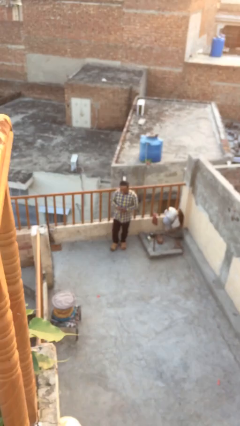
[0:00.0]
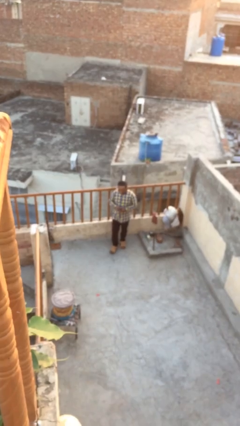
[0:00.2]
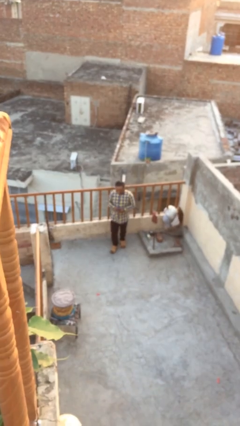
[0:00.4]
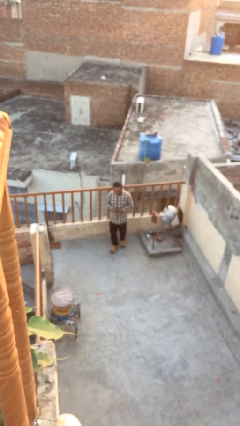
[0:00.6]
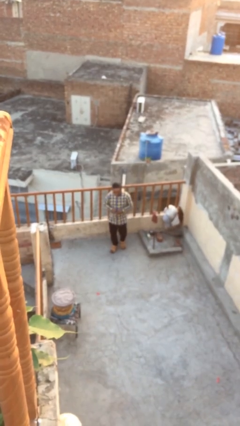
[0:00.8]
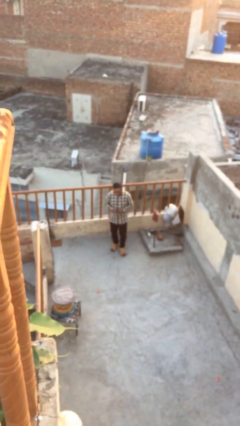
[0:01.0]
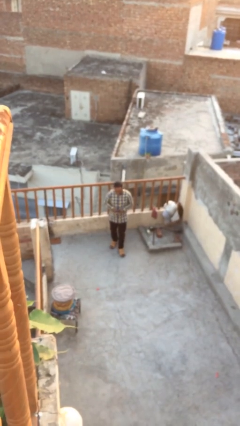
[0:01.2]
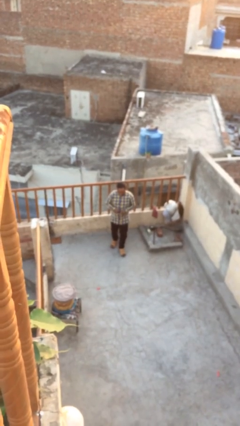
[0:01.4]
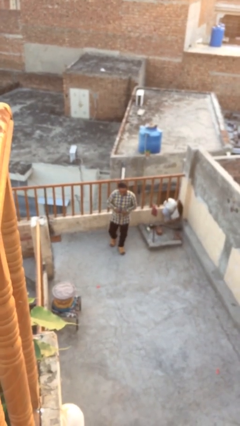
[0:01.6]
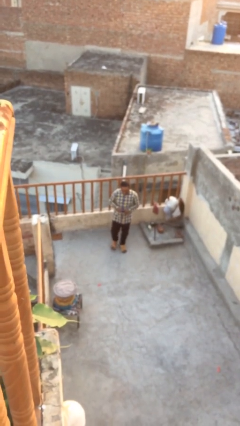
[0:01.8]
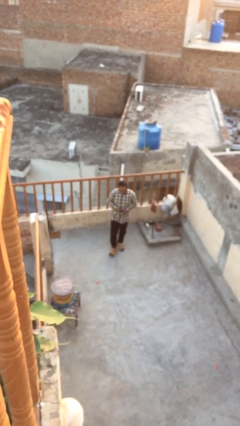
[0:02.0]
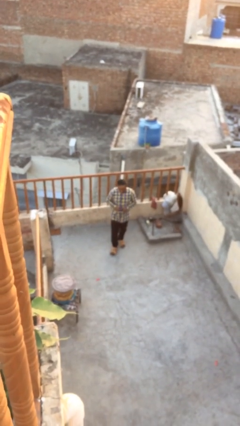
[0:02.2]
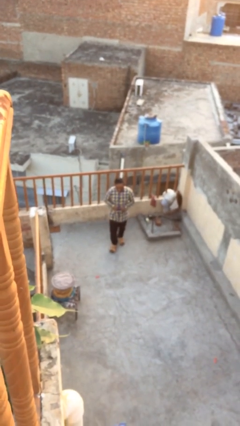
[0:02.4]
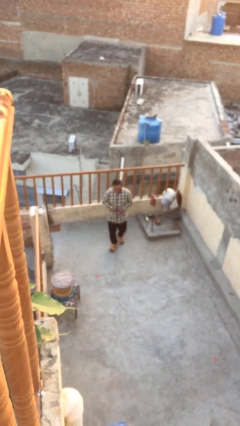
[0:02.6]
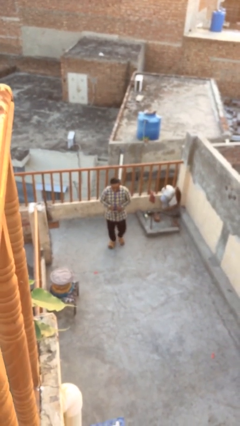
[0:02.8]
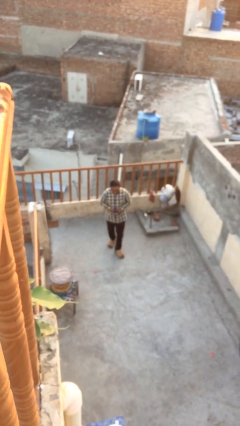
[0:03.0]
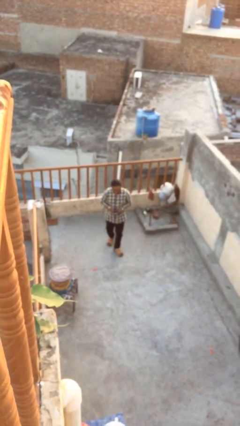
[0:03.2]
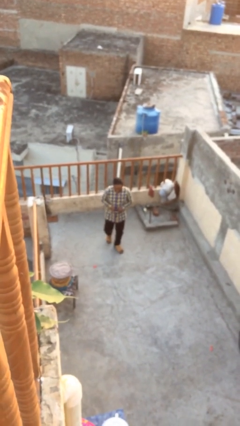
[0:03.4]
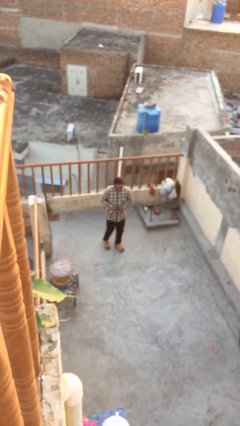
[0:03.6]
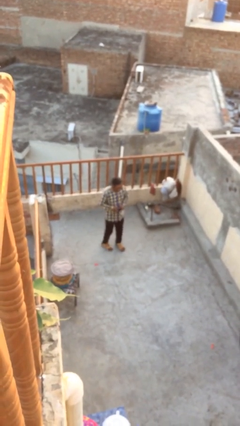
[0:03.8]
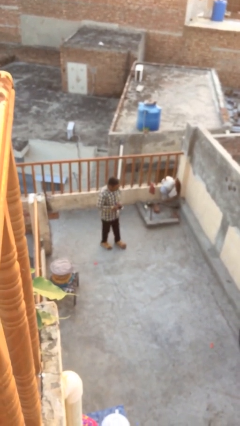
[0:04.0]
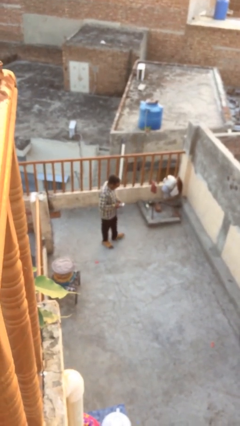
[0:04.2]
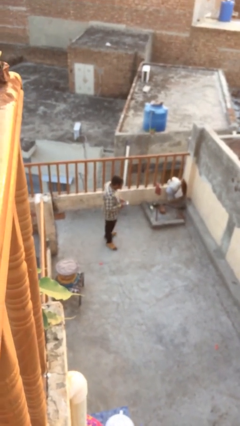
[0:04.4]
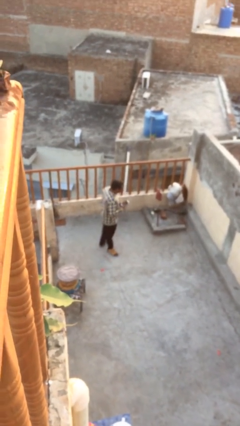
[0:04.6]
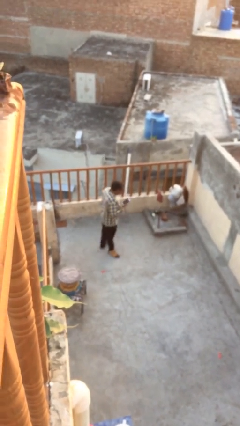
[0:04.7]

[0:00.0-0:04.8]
person texts on phone

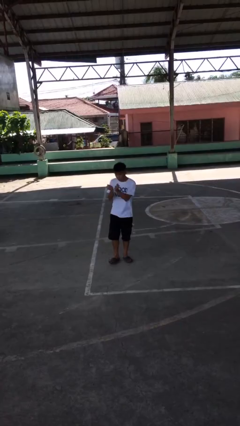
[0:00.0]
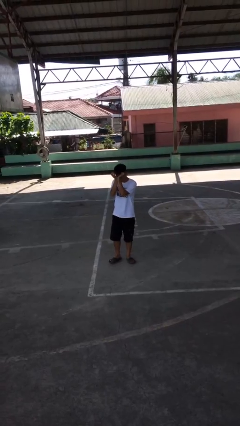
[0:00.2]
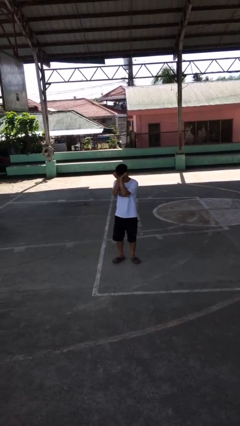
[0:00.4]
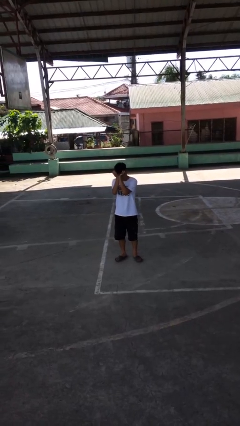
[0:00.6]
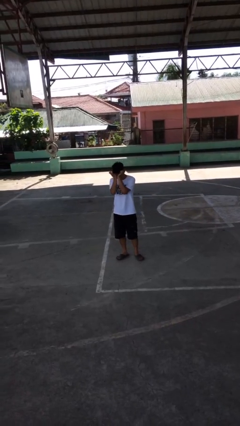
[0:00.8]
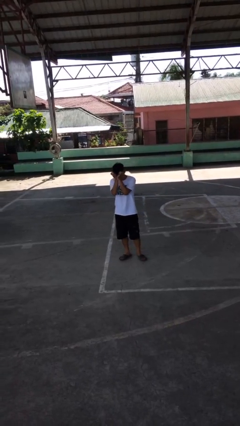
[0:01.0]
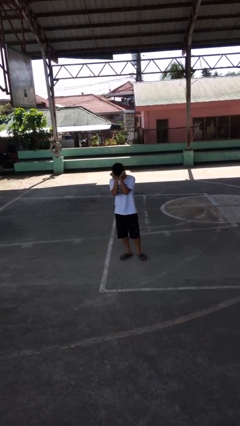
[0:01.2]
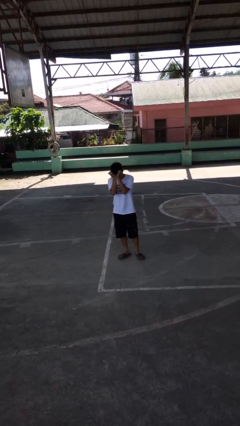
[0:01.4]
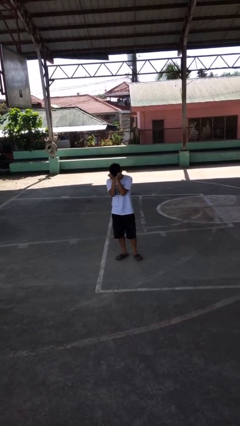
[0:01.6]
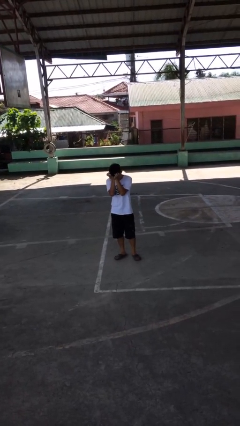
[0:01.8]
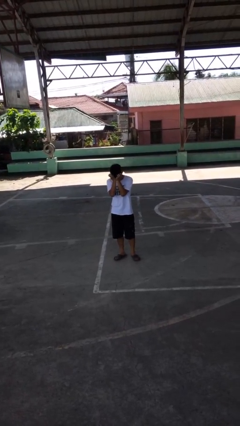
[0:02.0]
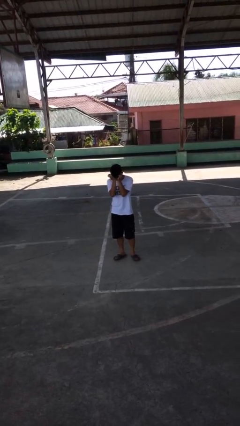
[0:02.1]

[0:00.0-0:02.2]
person rubs eyes

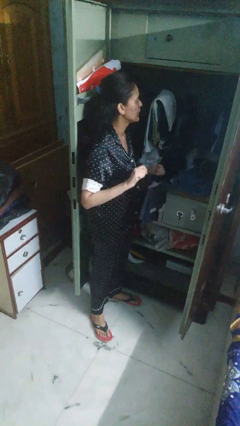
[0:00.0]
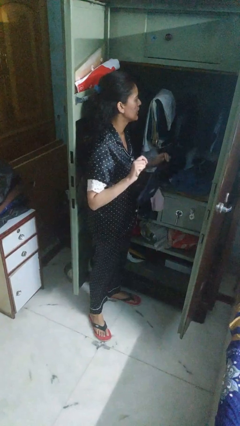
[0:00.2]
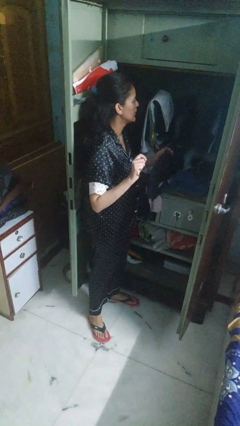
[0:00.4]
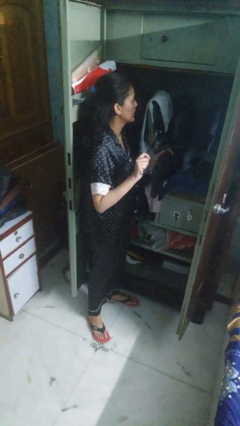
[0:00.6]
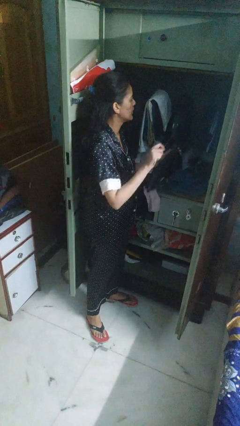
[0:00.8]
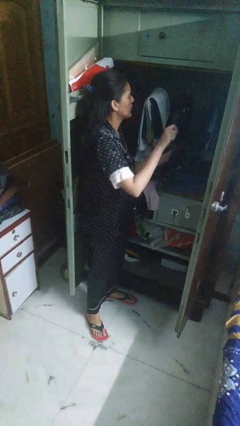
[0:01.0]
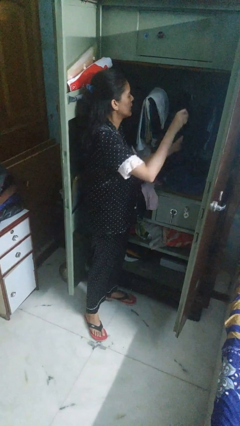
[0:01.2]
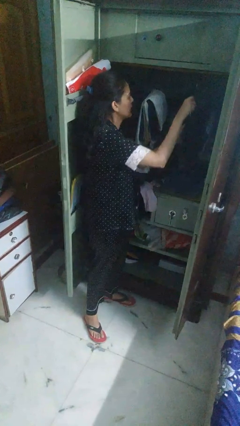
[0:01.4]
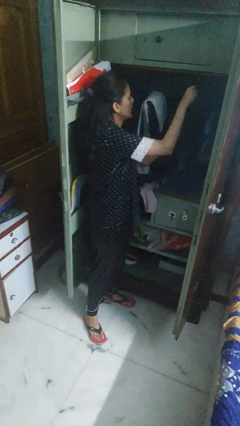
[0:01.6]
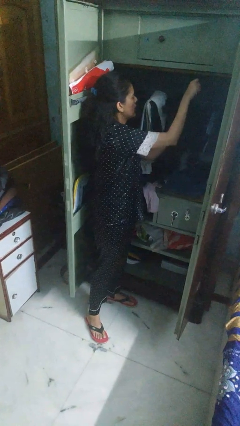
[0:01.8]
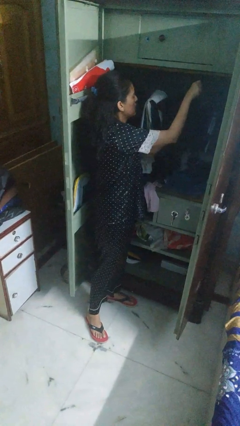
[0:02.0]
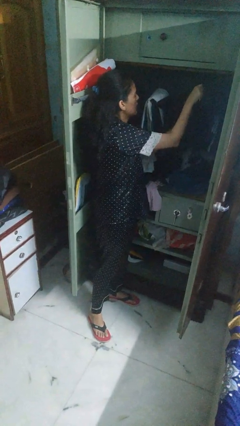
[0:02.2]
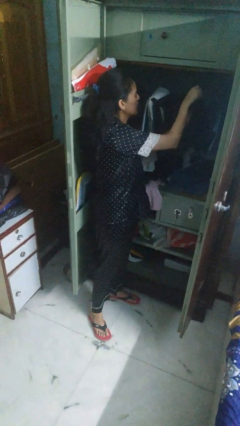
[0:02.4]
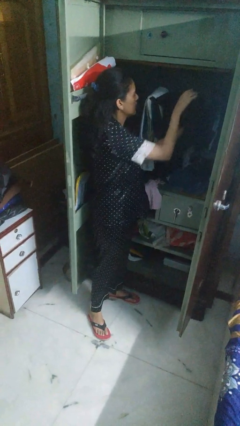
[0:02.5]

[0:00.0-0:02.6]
person puts clothes into closet

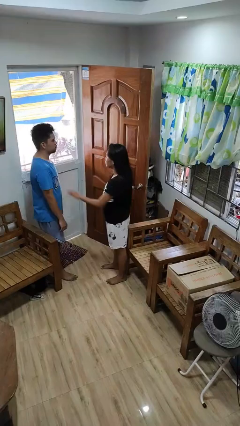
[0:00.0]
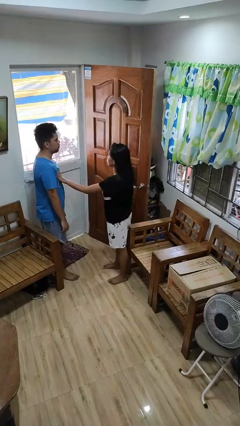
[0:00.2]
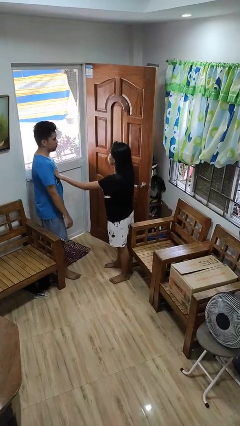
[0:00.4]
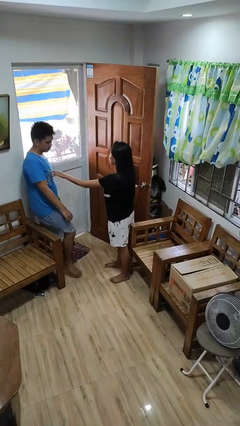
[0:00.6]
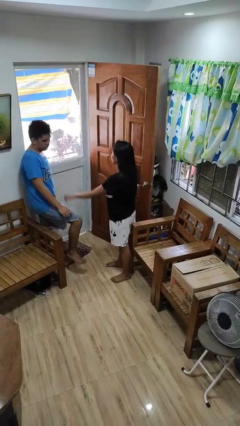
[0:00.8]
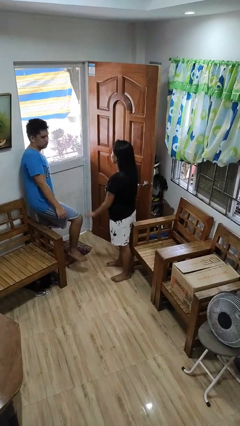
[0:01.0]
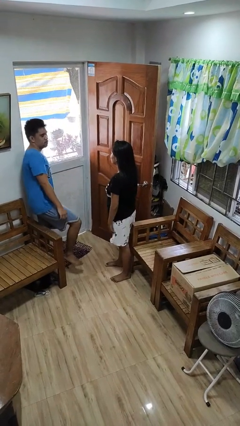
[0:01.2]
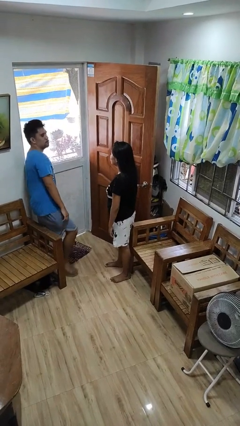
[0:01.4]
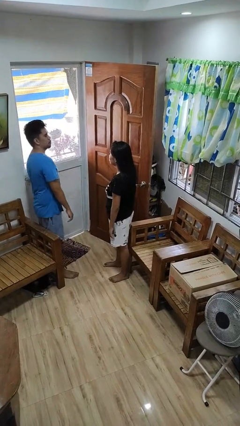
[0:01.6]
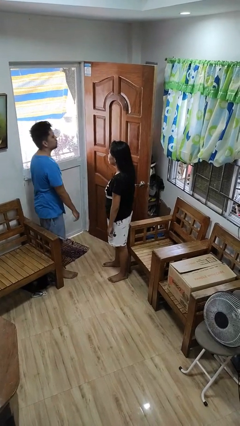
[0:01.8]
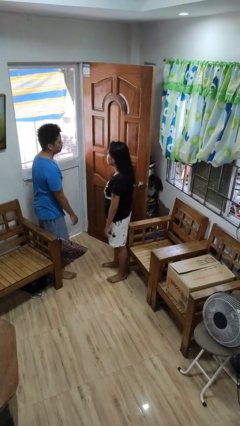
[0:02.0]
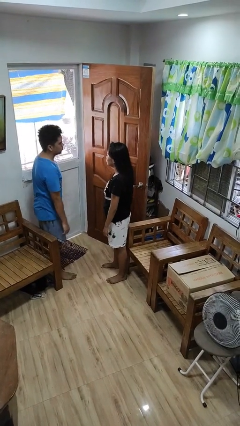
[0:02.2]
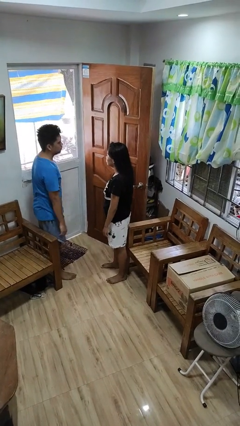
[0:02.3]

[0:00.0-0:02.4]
person shoves person

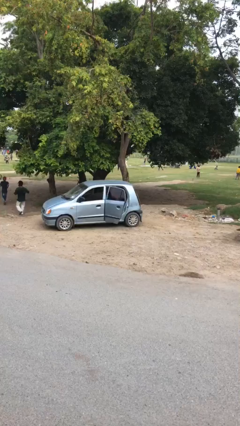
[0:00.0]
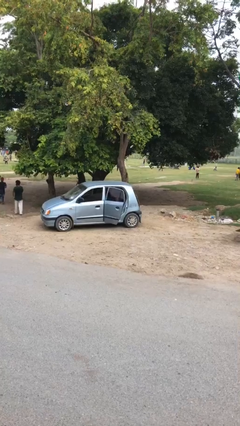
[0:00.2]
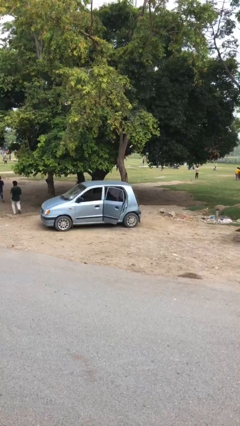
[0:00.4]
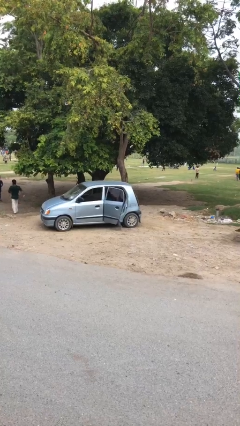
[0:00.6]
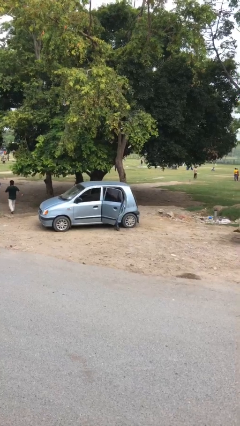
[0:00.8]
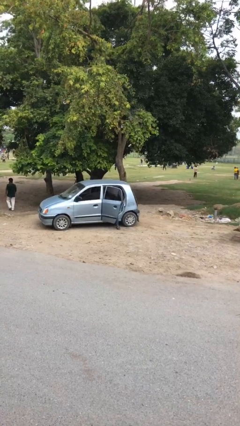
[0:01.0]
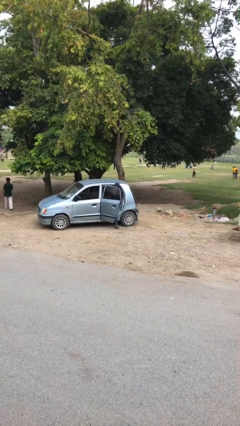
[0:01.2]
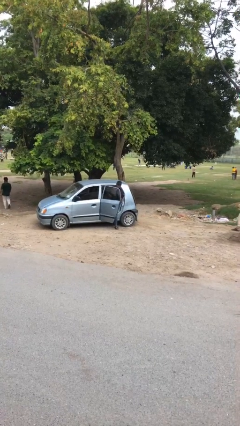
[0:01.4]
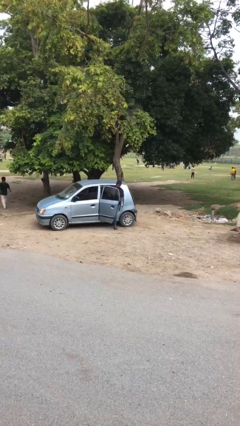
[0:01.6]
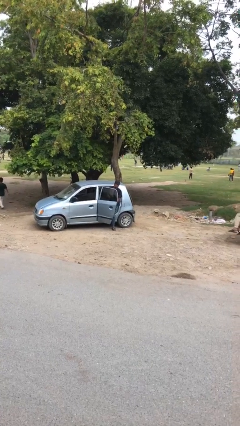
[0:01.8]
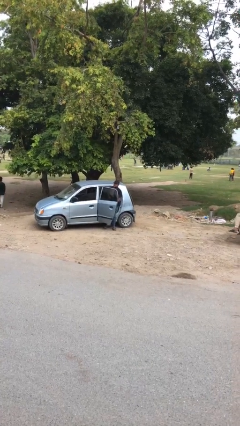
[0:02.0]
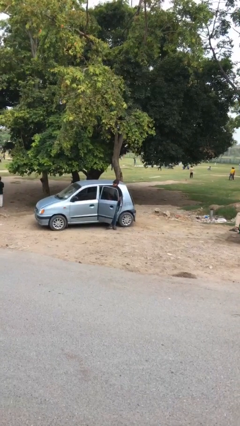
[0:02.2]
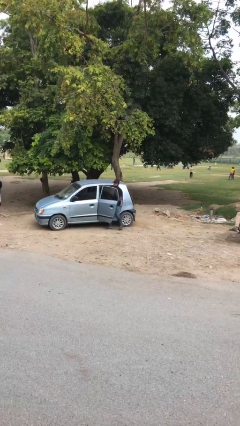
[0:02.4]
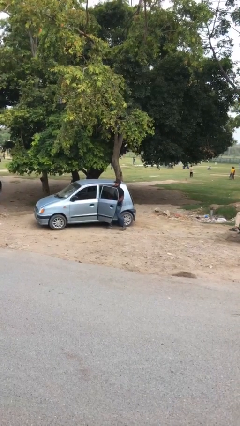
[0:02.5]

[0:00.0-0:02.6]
person exits car

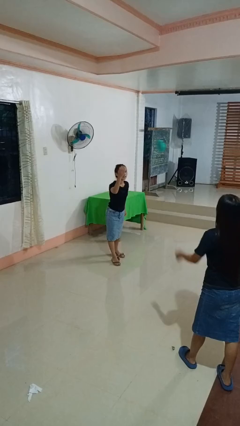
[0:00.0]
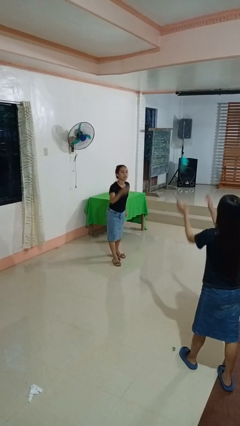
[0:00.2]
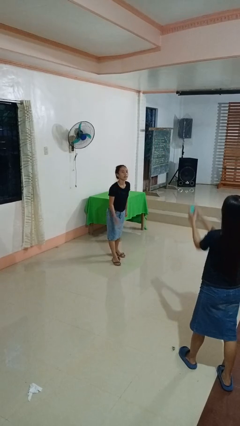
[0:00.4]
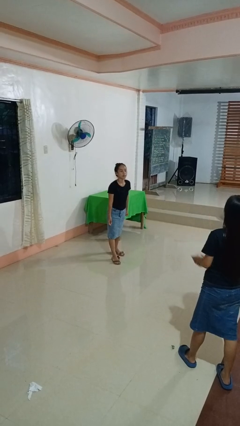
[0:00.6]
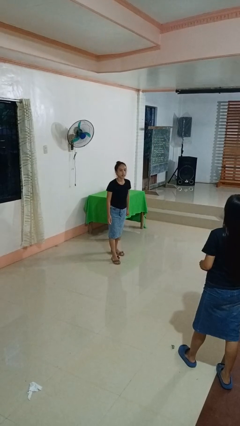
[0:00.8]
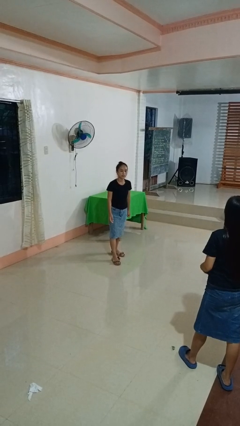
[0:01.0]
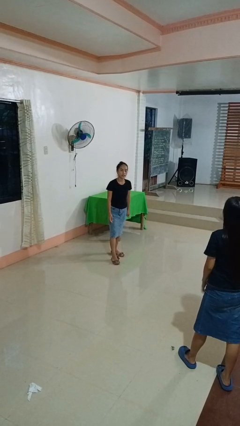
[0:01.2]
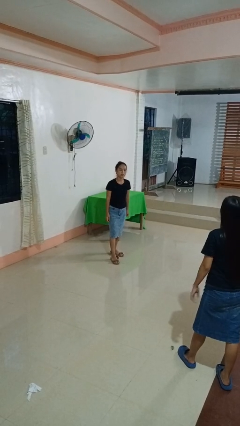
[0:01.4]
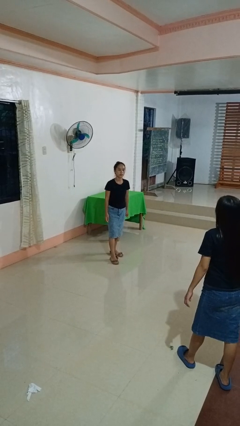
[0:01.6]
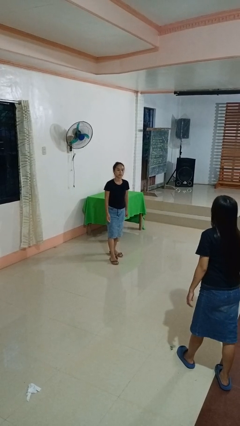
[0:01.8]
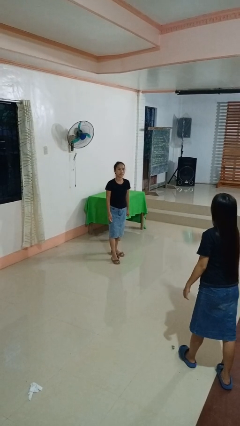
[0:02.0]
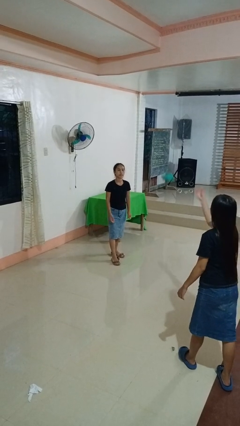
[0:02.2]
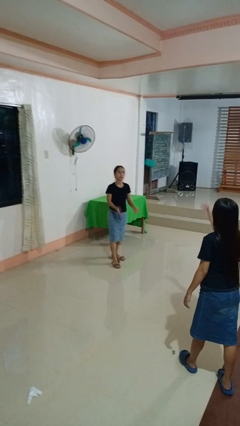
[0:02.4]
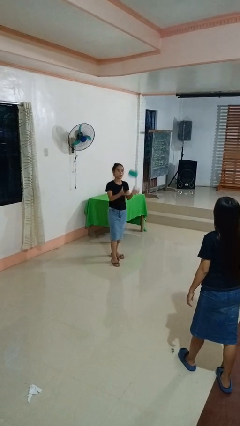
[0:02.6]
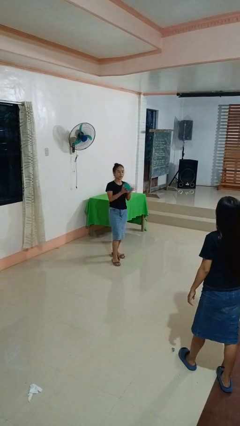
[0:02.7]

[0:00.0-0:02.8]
person throws object to person
